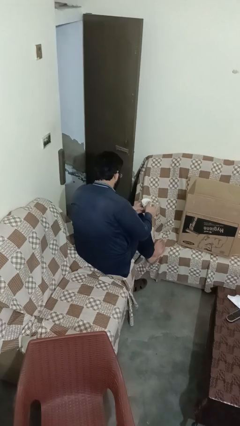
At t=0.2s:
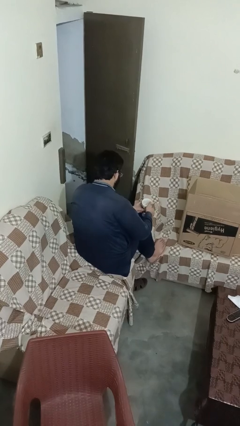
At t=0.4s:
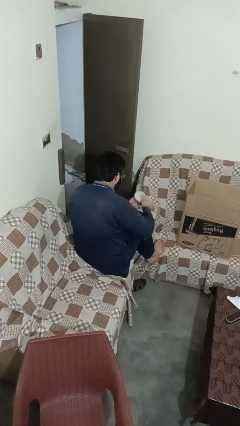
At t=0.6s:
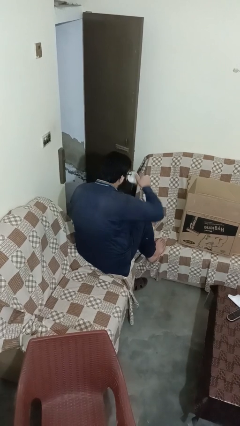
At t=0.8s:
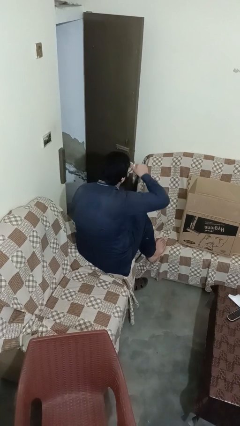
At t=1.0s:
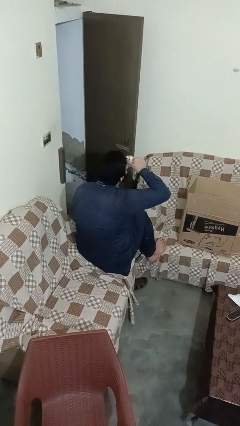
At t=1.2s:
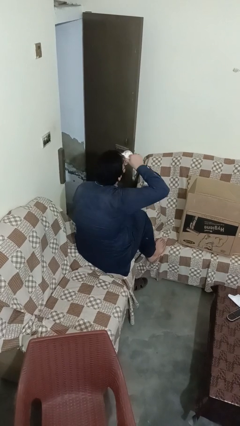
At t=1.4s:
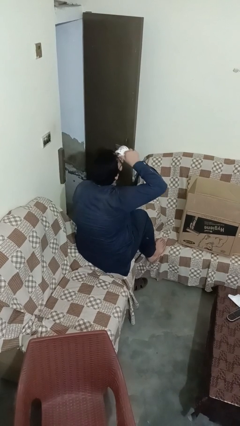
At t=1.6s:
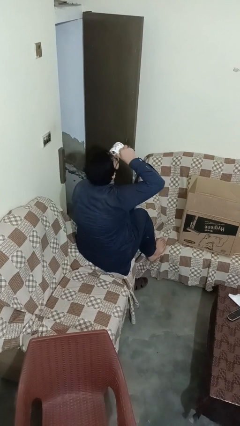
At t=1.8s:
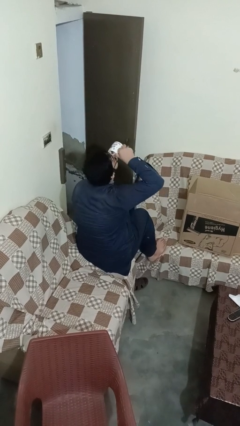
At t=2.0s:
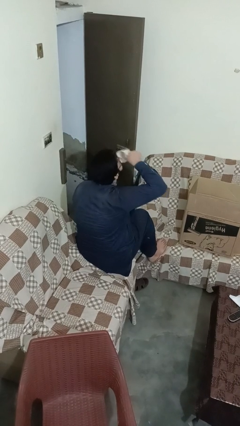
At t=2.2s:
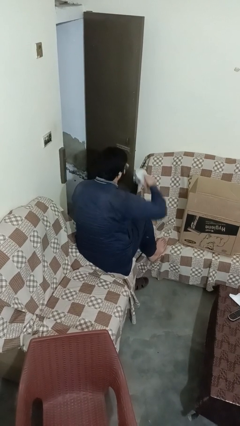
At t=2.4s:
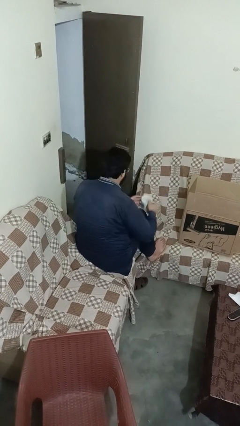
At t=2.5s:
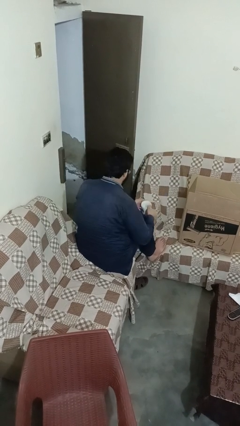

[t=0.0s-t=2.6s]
person drinks from mug

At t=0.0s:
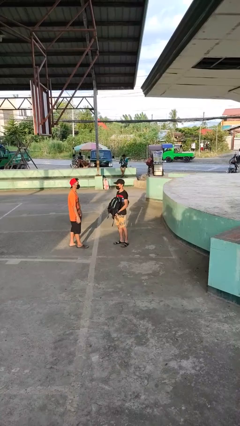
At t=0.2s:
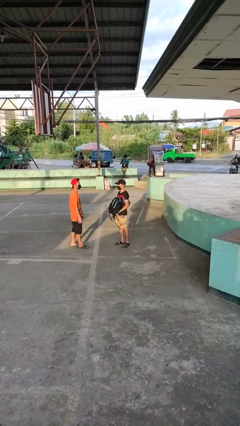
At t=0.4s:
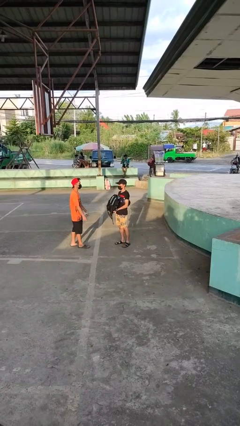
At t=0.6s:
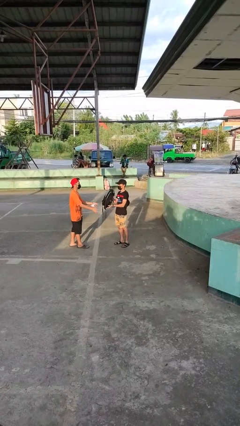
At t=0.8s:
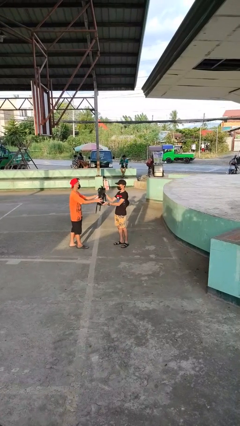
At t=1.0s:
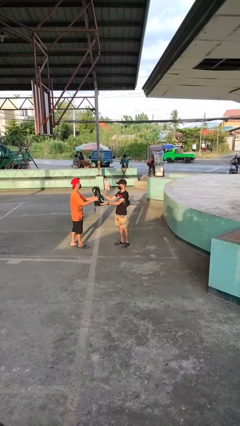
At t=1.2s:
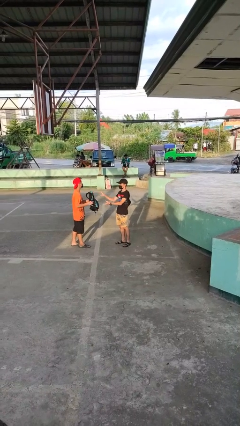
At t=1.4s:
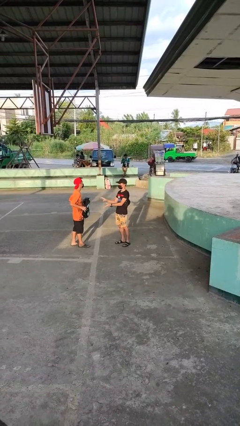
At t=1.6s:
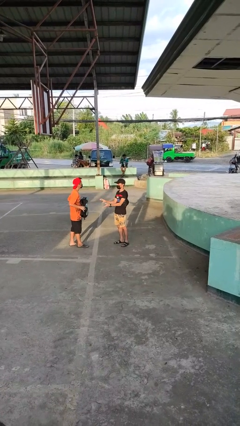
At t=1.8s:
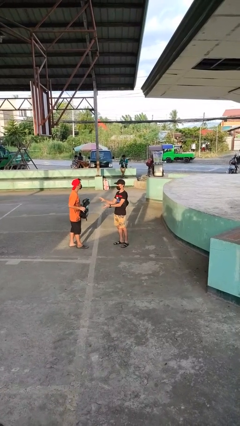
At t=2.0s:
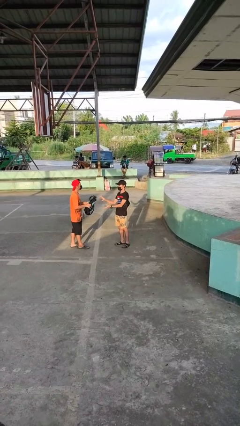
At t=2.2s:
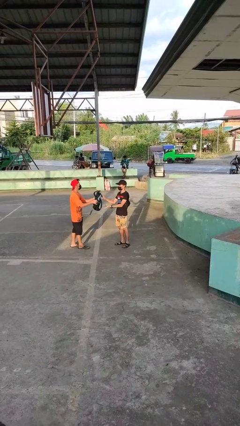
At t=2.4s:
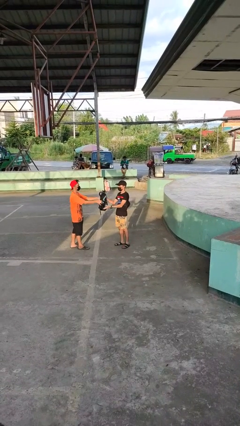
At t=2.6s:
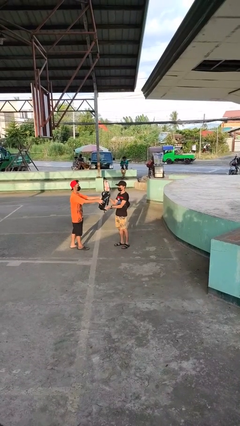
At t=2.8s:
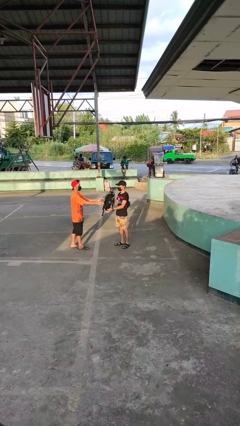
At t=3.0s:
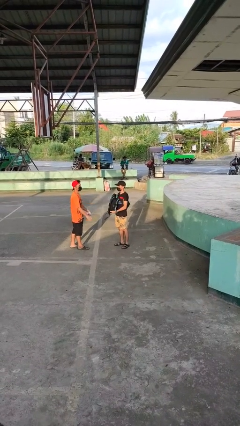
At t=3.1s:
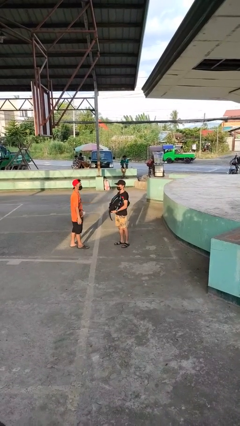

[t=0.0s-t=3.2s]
person transfers object to person

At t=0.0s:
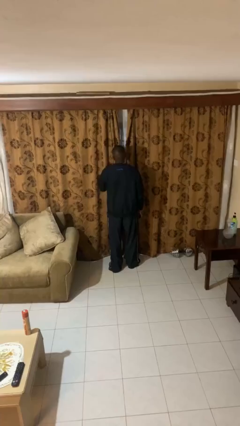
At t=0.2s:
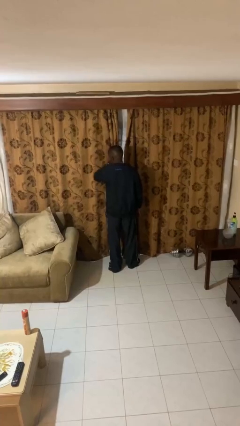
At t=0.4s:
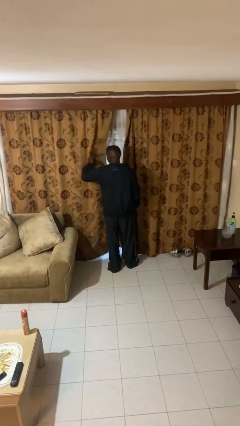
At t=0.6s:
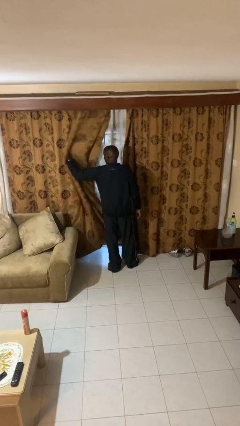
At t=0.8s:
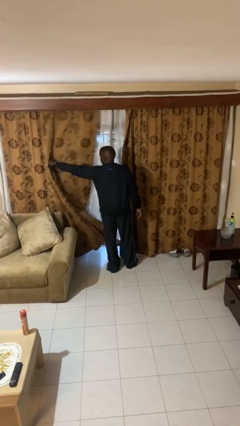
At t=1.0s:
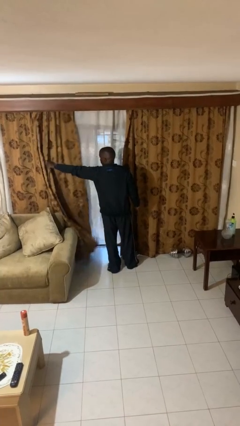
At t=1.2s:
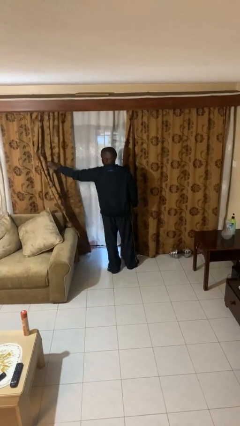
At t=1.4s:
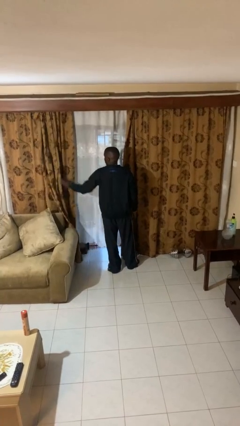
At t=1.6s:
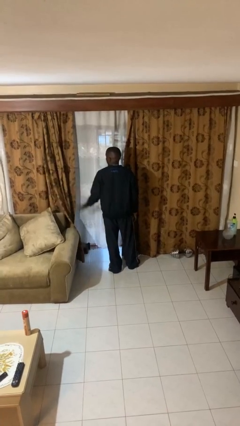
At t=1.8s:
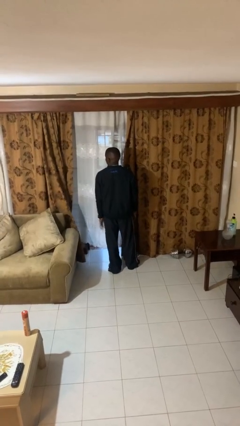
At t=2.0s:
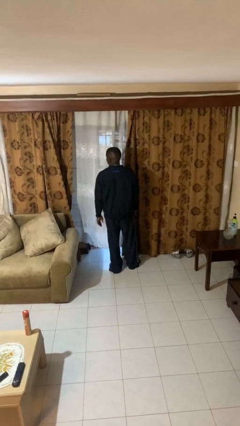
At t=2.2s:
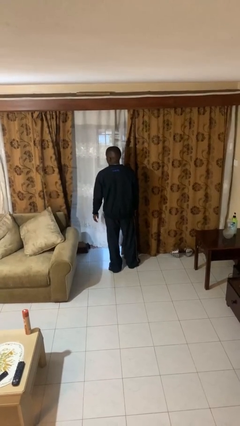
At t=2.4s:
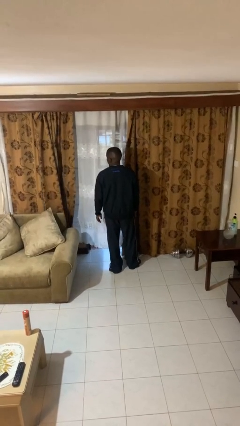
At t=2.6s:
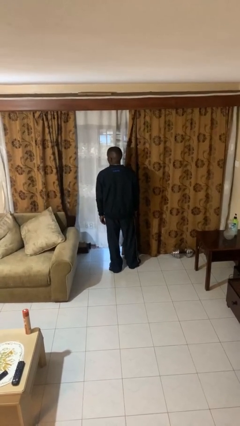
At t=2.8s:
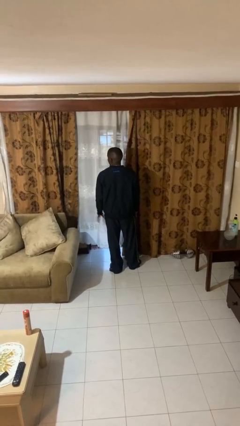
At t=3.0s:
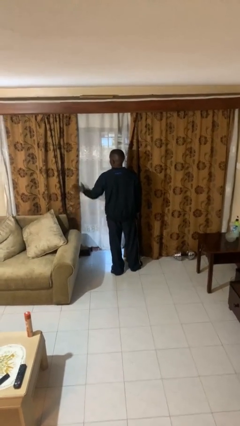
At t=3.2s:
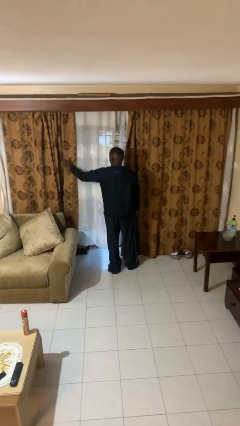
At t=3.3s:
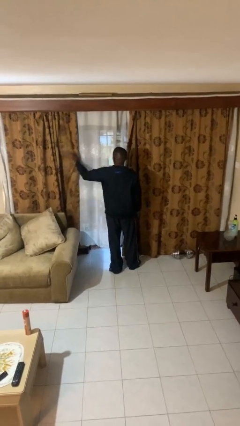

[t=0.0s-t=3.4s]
person opens curtains

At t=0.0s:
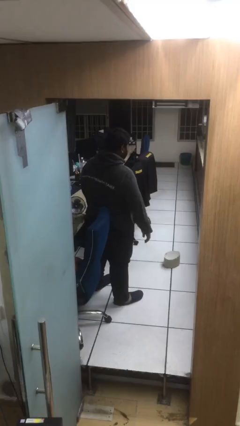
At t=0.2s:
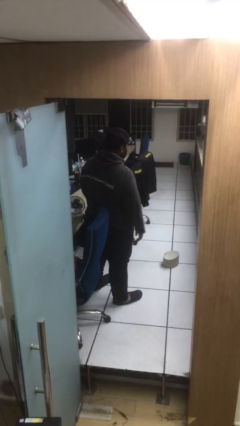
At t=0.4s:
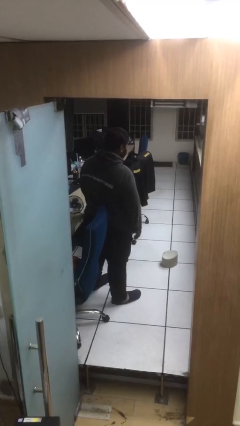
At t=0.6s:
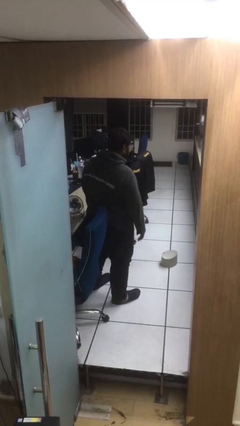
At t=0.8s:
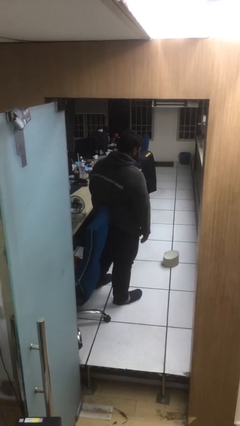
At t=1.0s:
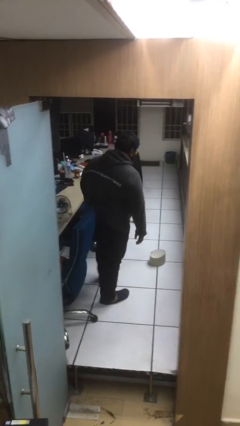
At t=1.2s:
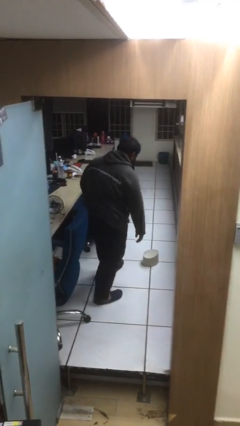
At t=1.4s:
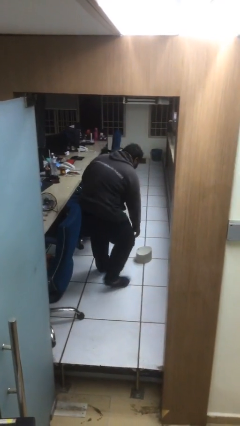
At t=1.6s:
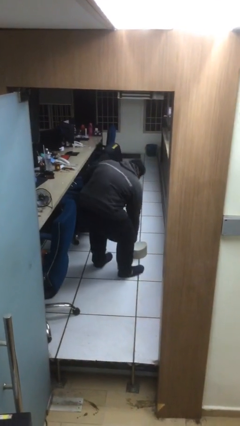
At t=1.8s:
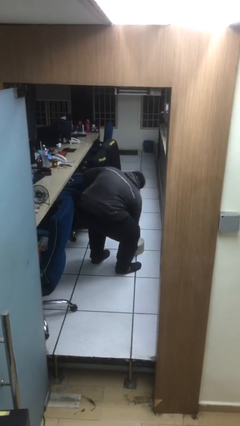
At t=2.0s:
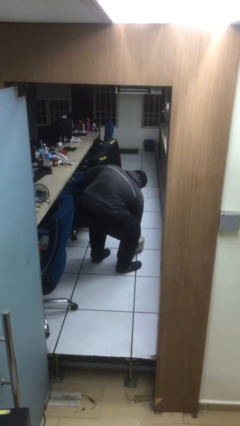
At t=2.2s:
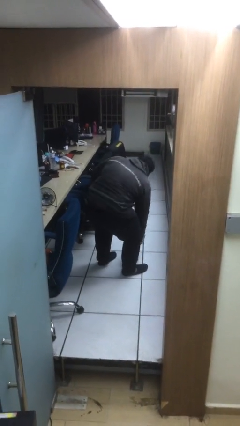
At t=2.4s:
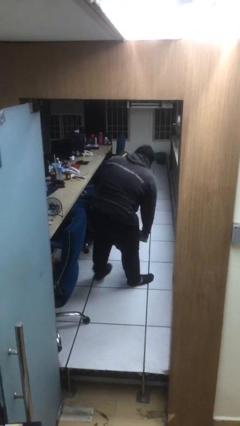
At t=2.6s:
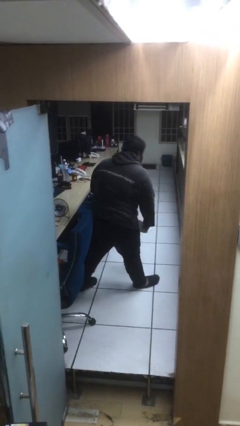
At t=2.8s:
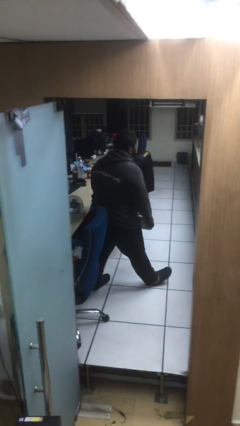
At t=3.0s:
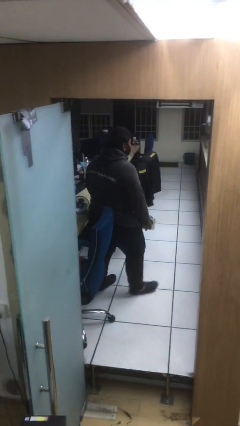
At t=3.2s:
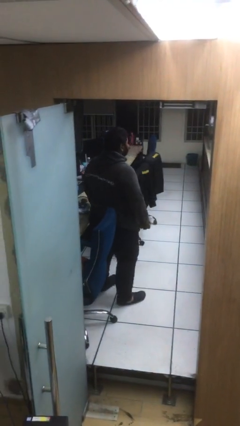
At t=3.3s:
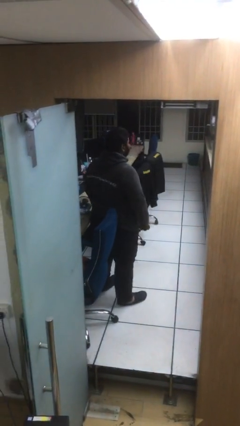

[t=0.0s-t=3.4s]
person picks up object from floor

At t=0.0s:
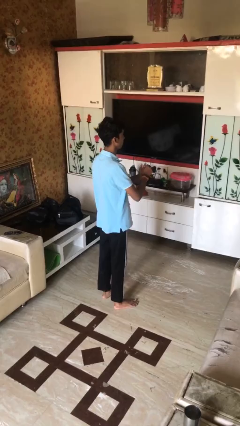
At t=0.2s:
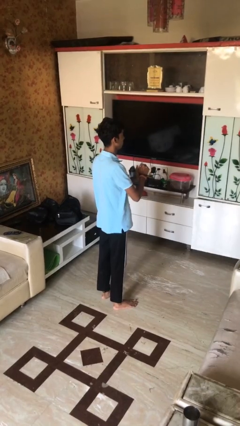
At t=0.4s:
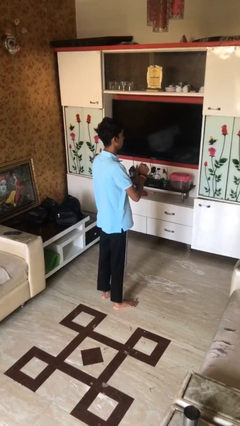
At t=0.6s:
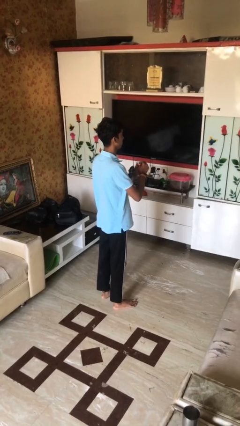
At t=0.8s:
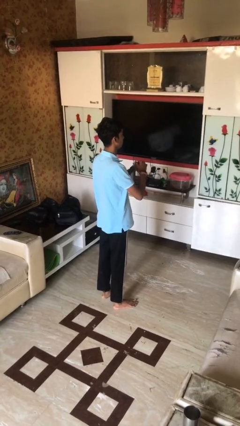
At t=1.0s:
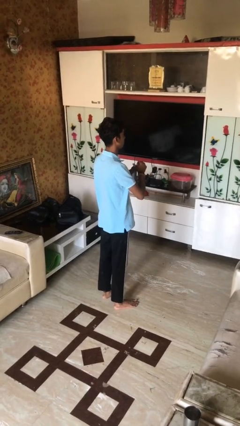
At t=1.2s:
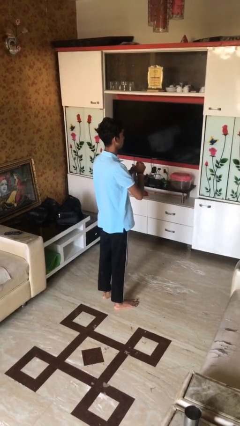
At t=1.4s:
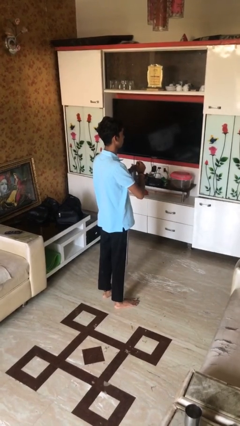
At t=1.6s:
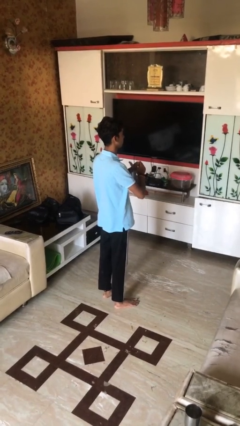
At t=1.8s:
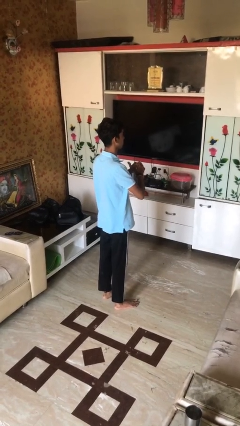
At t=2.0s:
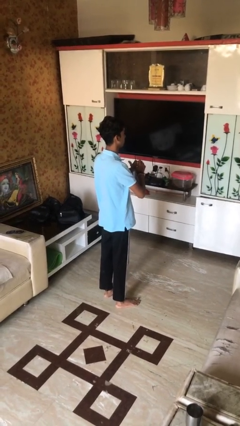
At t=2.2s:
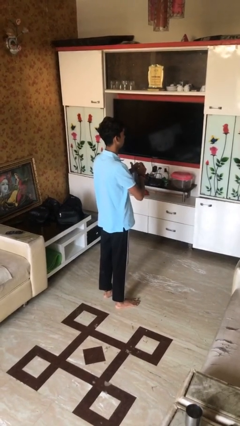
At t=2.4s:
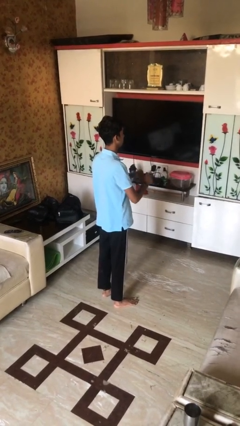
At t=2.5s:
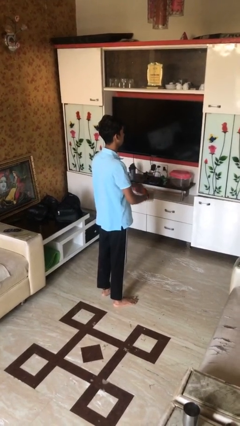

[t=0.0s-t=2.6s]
person cracks knuckles

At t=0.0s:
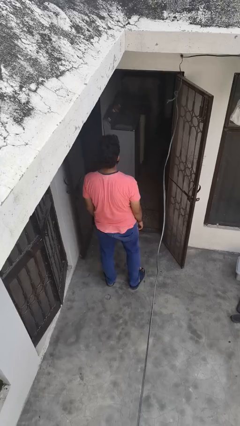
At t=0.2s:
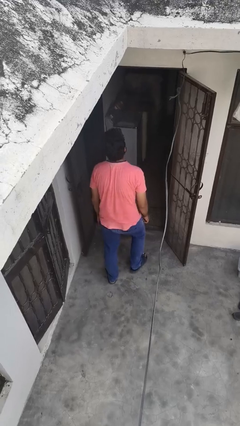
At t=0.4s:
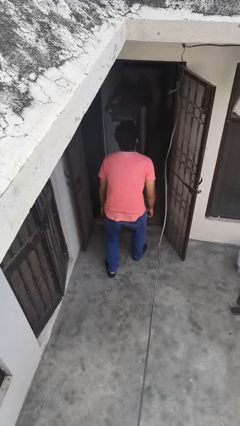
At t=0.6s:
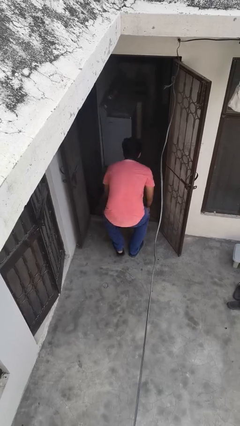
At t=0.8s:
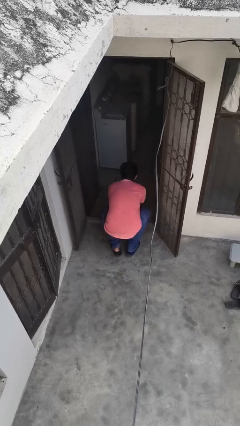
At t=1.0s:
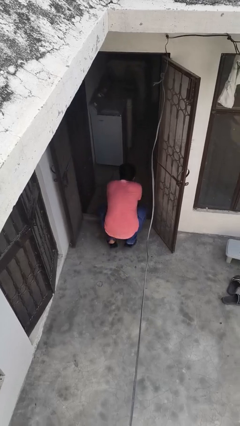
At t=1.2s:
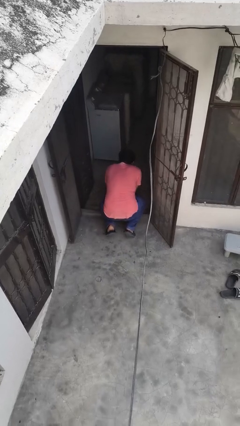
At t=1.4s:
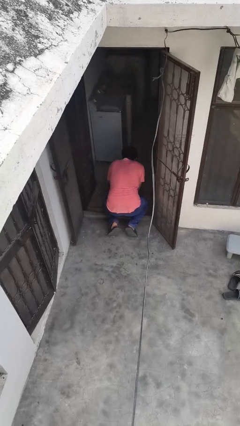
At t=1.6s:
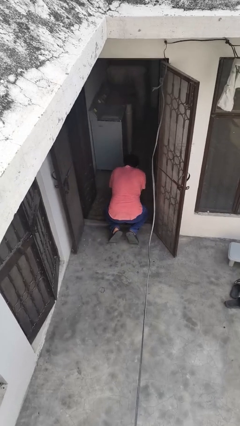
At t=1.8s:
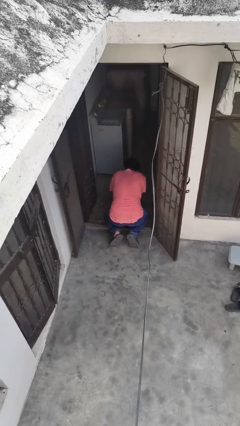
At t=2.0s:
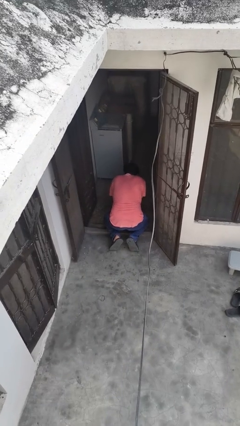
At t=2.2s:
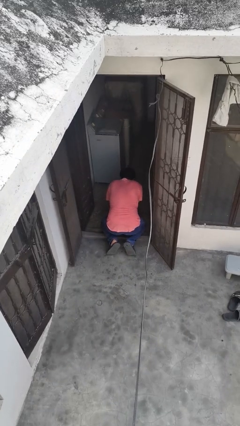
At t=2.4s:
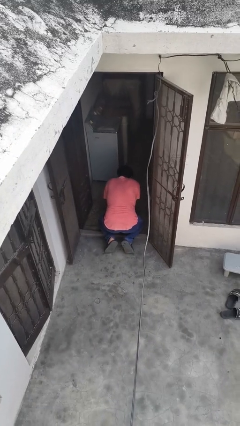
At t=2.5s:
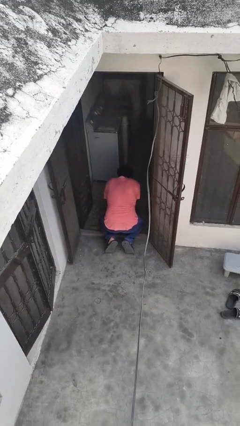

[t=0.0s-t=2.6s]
person trips on object on floor
